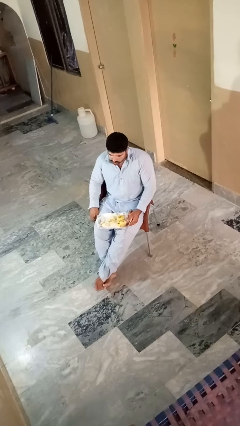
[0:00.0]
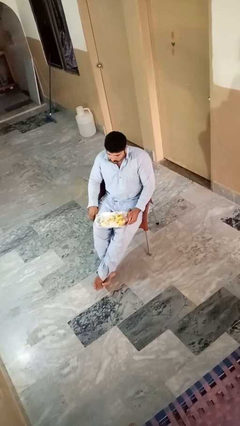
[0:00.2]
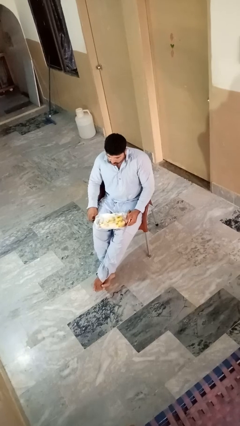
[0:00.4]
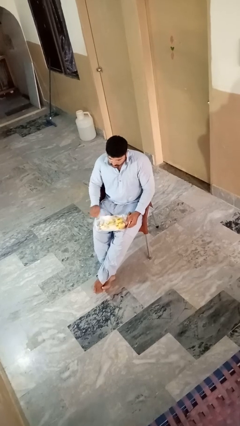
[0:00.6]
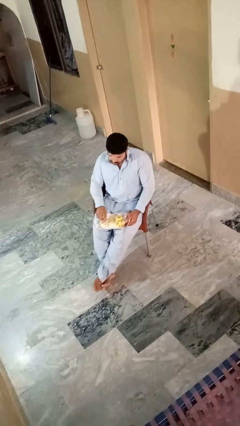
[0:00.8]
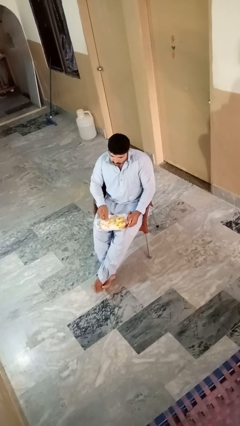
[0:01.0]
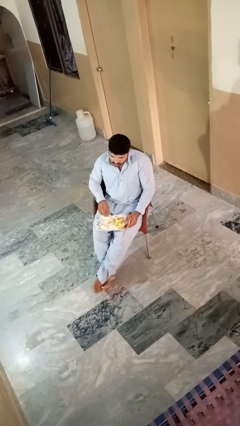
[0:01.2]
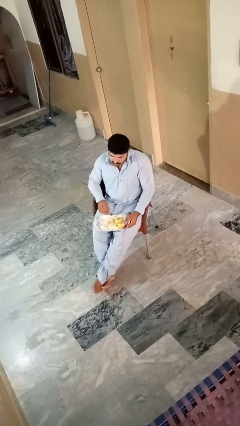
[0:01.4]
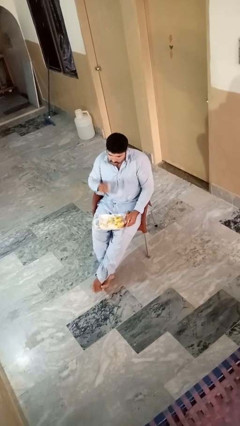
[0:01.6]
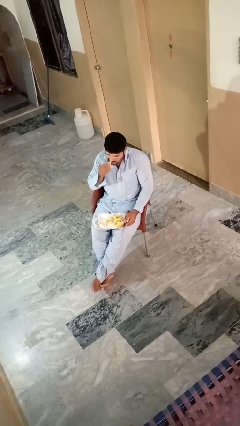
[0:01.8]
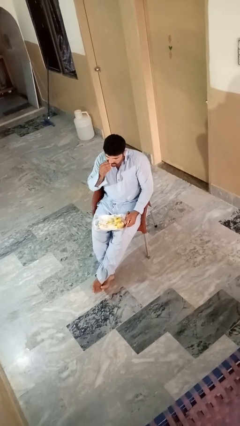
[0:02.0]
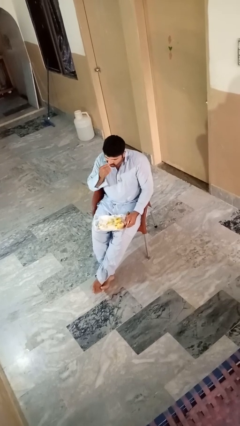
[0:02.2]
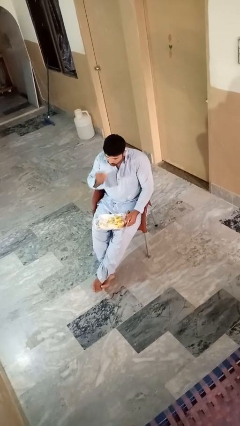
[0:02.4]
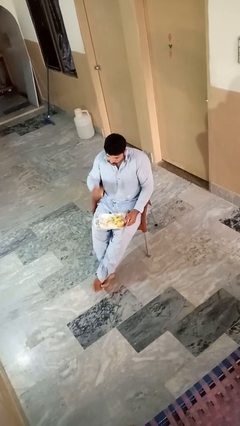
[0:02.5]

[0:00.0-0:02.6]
person eats apple

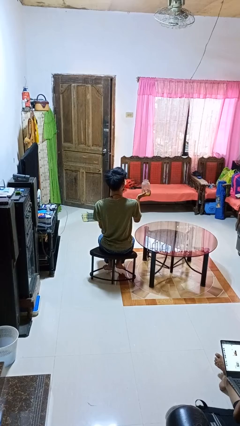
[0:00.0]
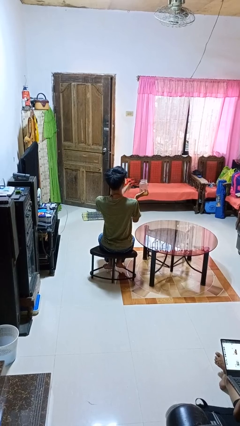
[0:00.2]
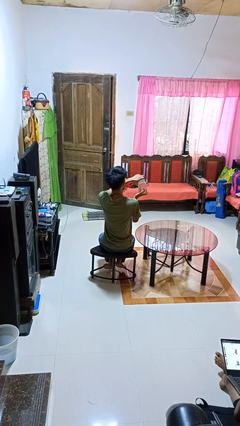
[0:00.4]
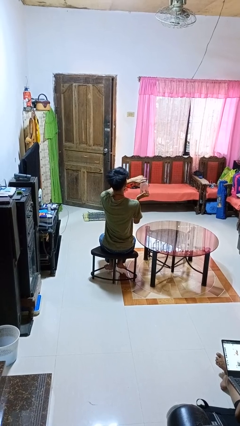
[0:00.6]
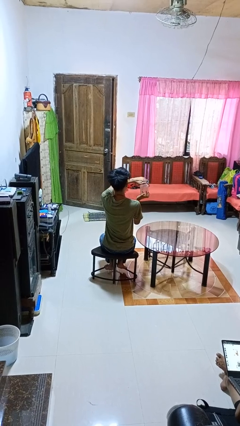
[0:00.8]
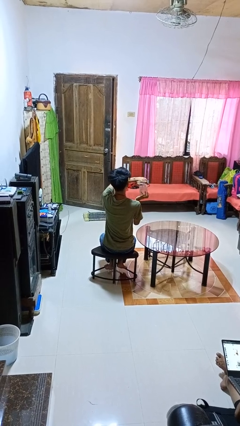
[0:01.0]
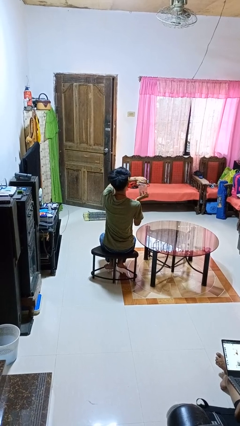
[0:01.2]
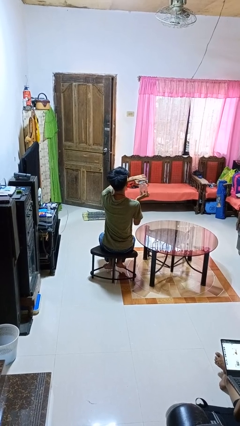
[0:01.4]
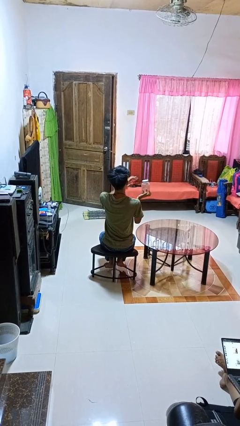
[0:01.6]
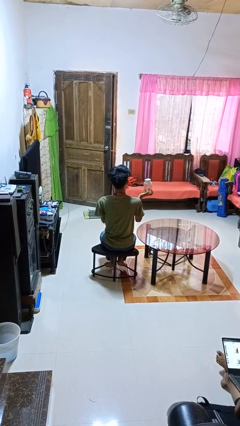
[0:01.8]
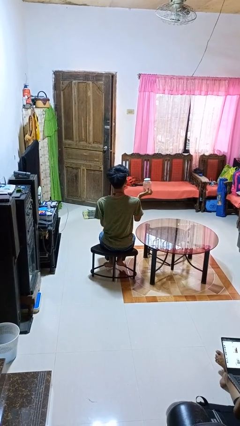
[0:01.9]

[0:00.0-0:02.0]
person closes jar

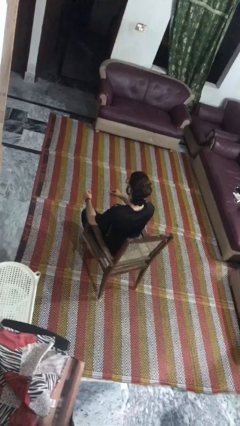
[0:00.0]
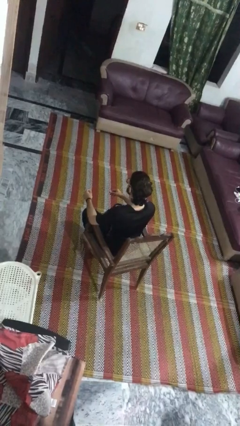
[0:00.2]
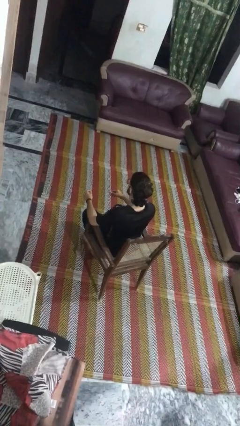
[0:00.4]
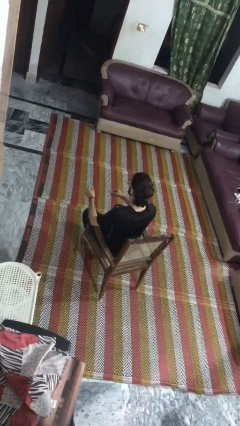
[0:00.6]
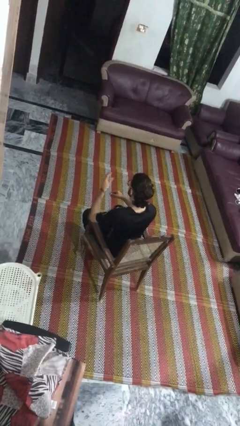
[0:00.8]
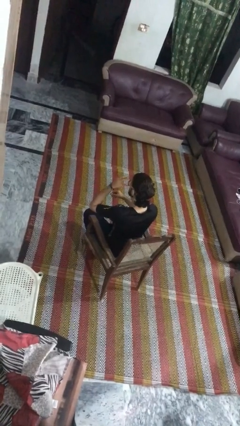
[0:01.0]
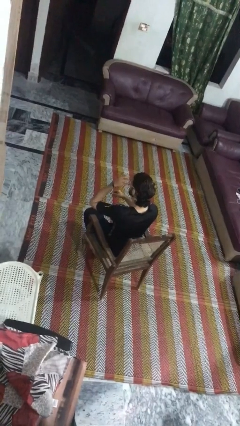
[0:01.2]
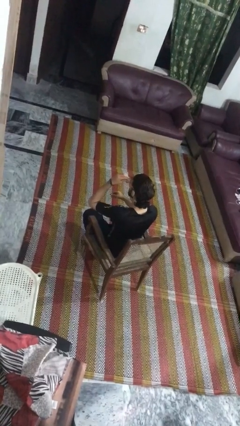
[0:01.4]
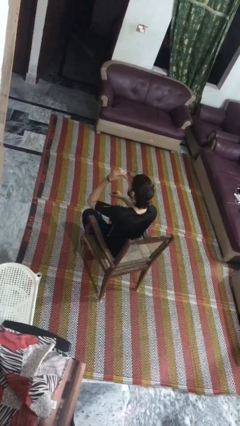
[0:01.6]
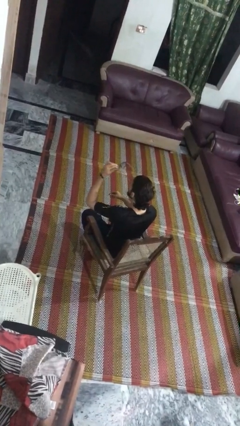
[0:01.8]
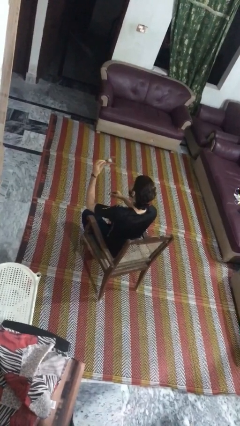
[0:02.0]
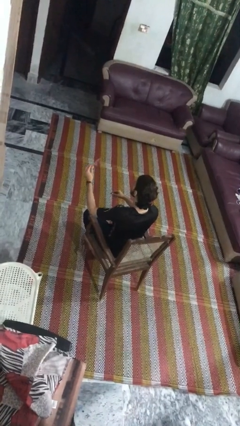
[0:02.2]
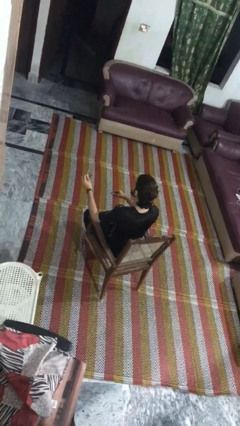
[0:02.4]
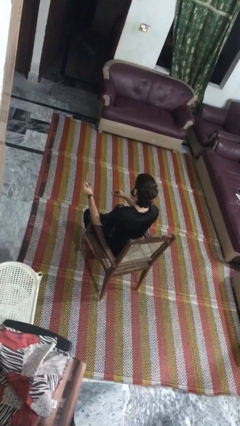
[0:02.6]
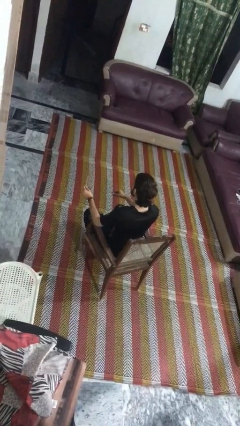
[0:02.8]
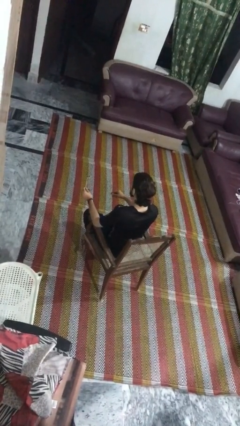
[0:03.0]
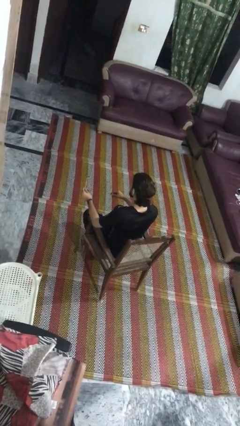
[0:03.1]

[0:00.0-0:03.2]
person takes off glasses

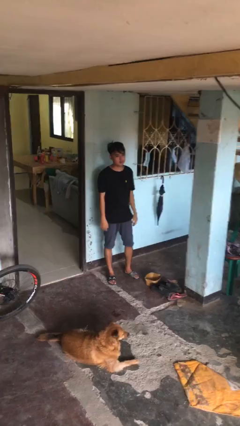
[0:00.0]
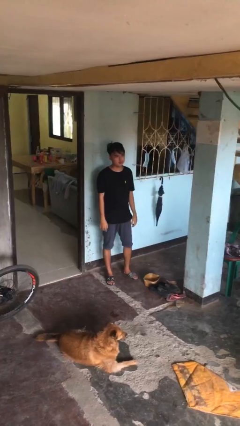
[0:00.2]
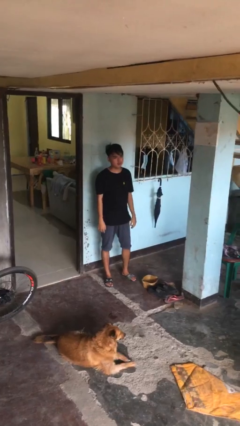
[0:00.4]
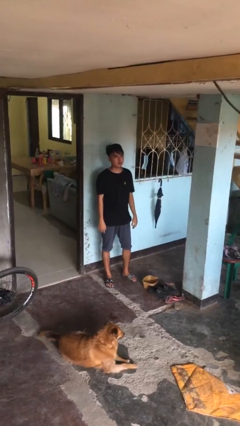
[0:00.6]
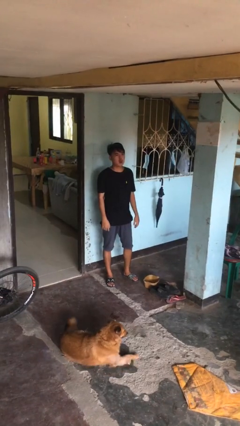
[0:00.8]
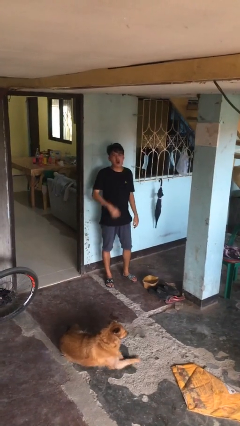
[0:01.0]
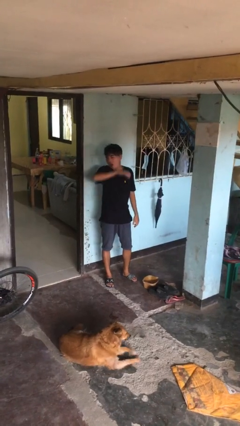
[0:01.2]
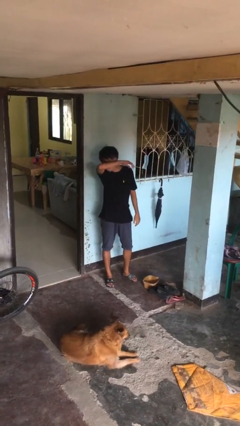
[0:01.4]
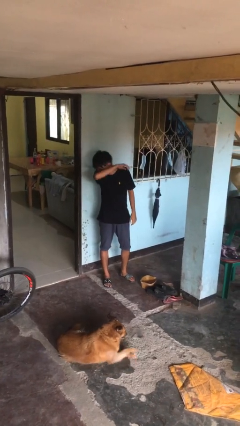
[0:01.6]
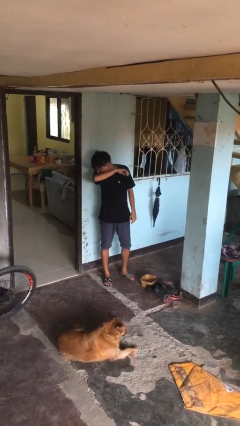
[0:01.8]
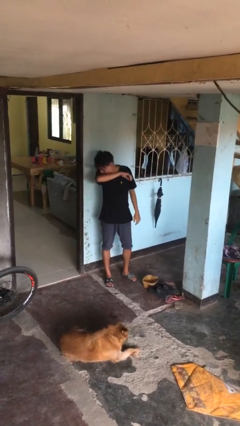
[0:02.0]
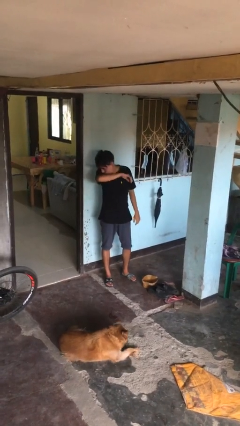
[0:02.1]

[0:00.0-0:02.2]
person sneezes into arm

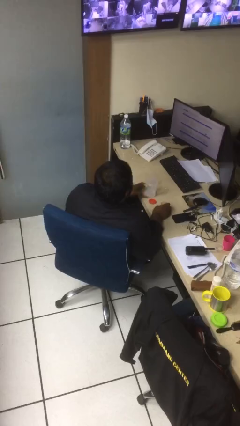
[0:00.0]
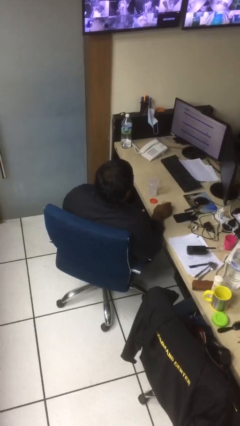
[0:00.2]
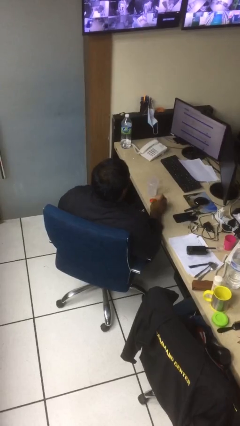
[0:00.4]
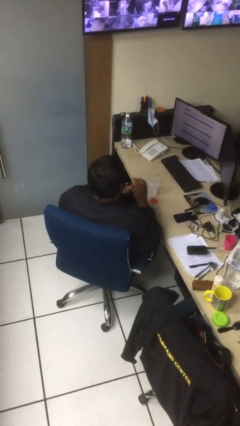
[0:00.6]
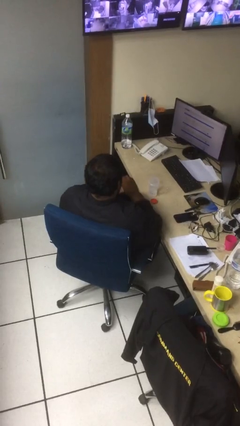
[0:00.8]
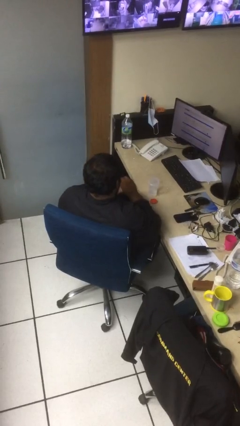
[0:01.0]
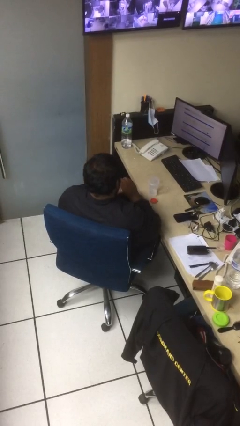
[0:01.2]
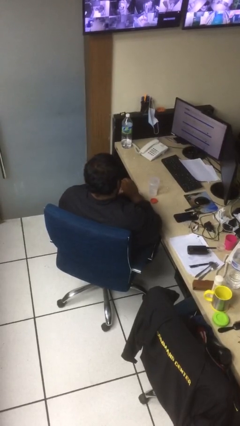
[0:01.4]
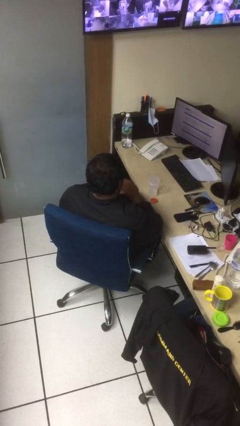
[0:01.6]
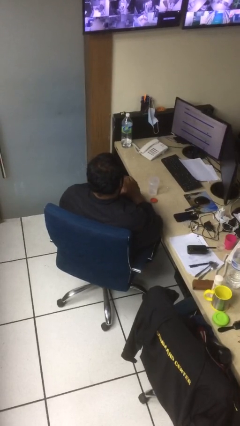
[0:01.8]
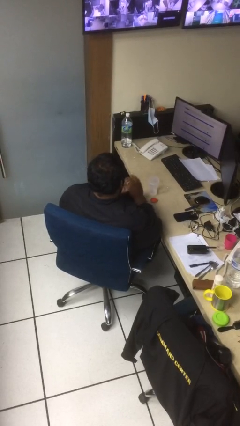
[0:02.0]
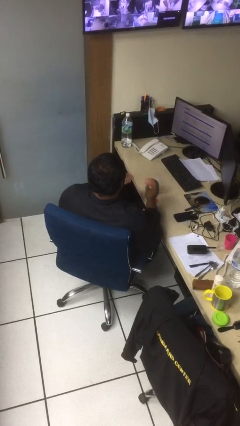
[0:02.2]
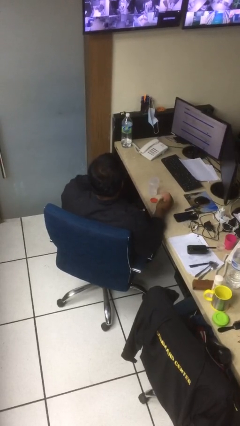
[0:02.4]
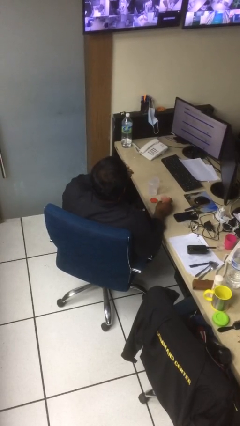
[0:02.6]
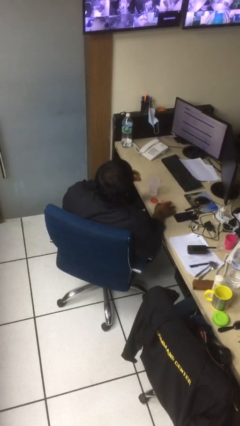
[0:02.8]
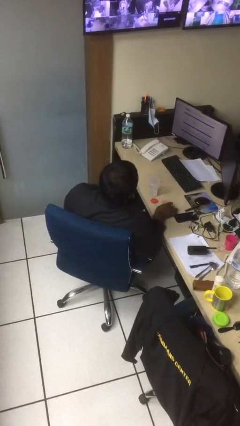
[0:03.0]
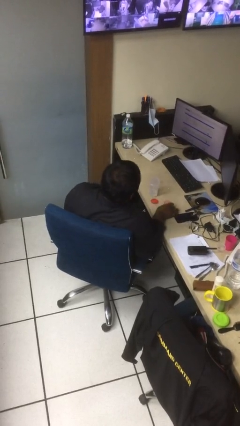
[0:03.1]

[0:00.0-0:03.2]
person takes medicine pills

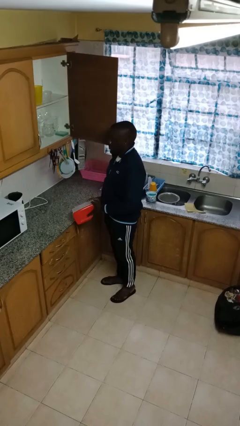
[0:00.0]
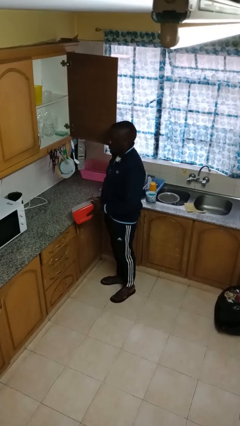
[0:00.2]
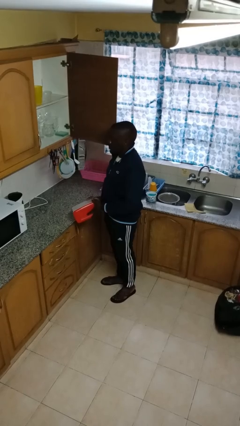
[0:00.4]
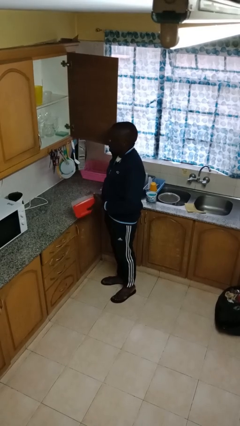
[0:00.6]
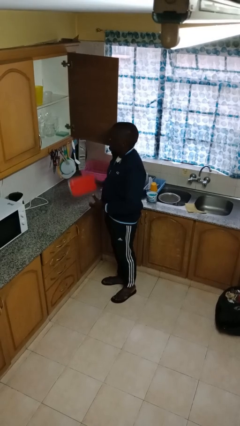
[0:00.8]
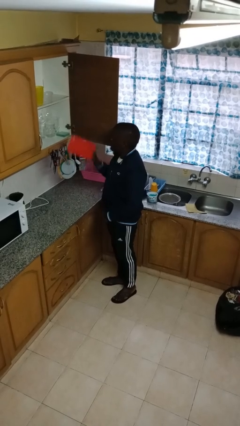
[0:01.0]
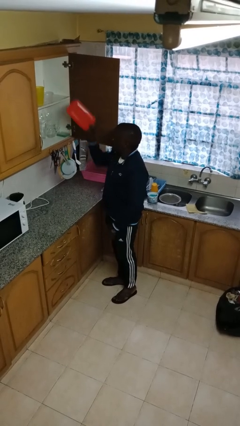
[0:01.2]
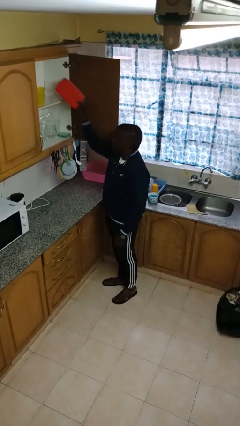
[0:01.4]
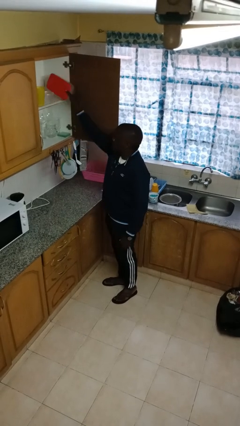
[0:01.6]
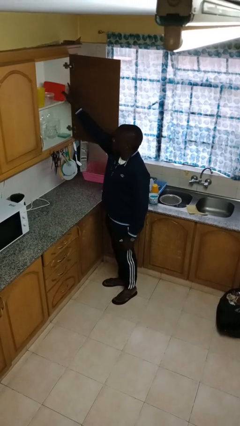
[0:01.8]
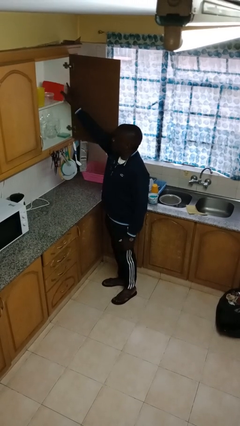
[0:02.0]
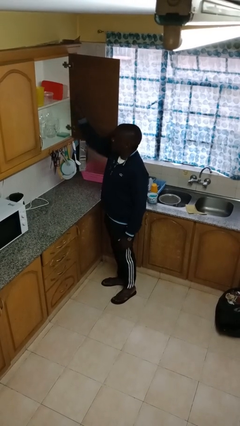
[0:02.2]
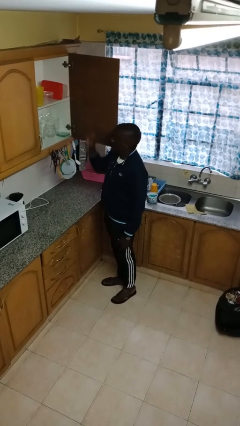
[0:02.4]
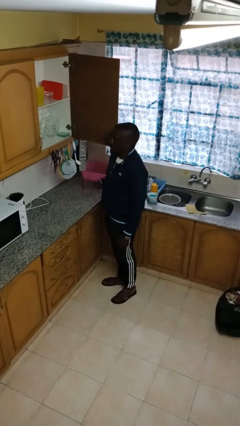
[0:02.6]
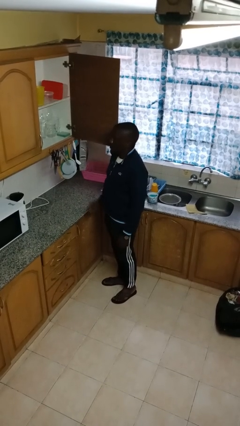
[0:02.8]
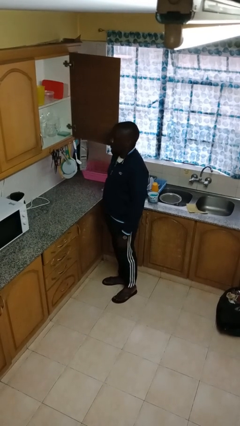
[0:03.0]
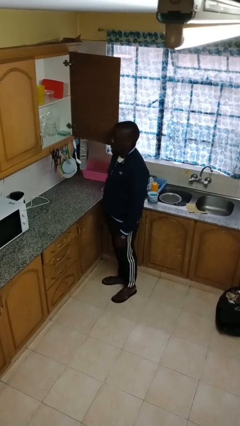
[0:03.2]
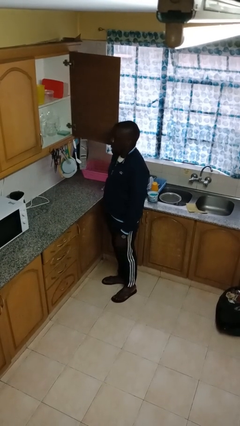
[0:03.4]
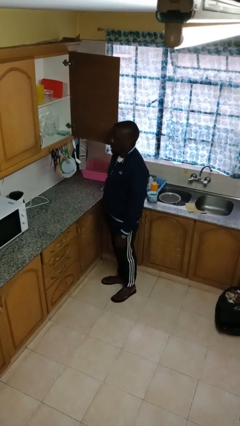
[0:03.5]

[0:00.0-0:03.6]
person puts down object on shelf

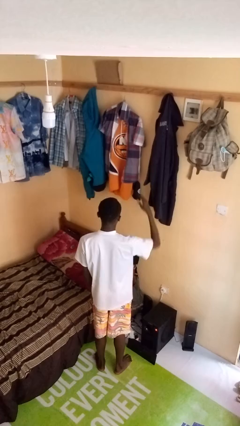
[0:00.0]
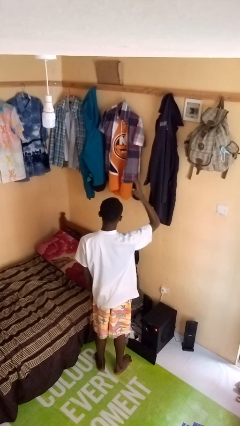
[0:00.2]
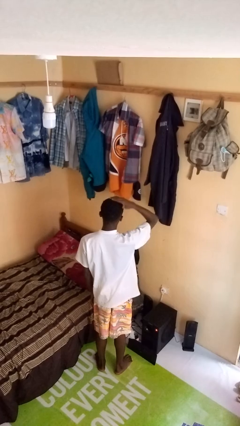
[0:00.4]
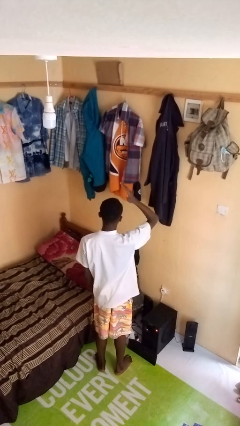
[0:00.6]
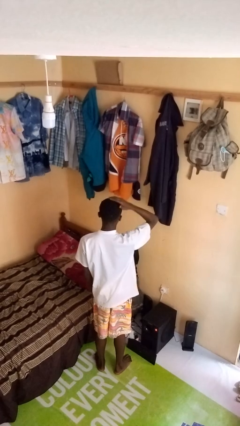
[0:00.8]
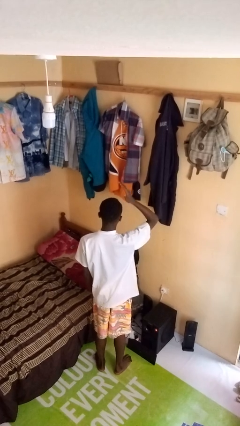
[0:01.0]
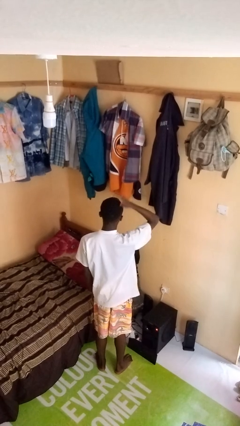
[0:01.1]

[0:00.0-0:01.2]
person pats head
